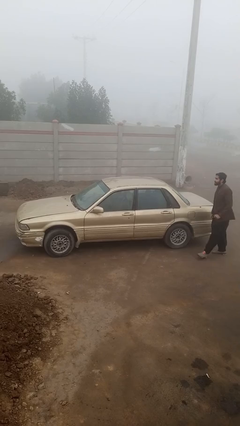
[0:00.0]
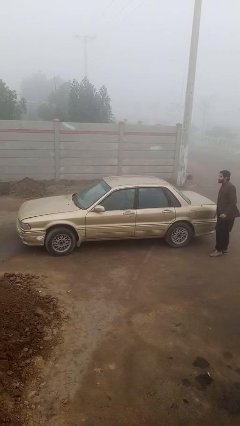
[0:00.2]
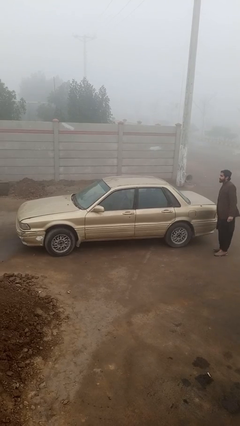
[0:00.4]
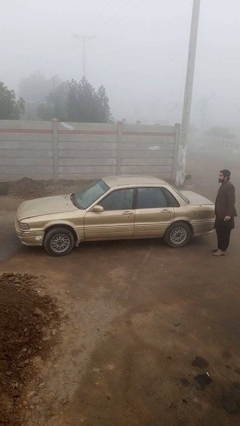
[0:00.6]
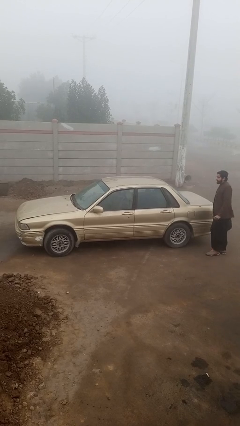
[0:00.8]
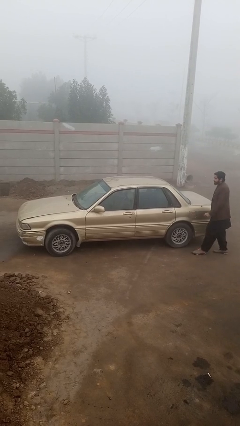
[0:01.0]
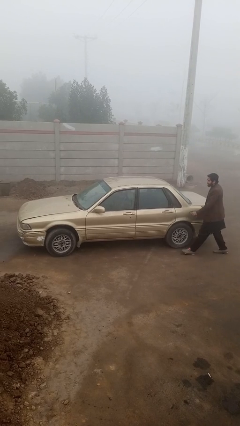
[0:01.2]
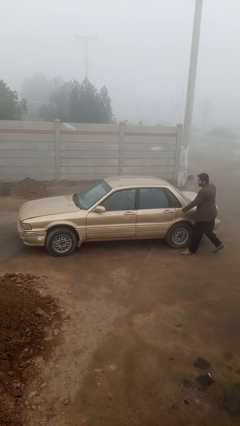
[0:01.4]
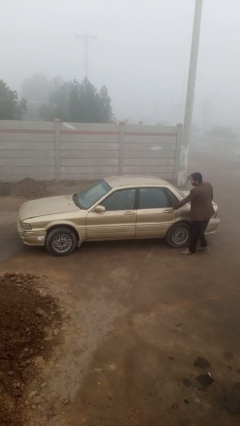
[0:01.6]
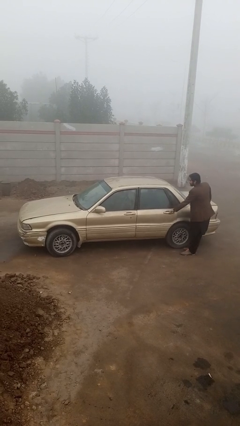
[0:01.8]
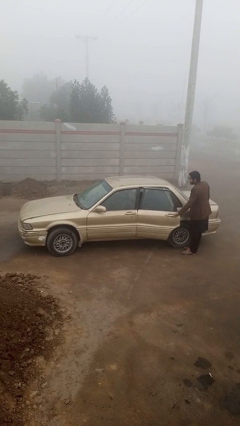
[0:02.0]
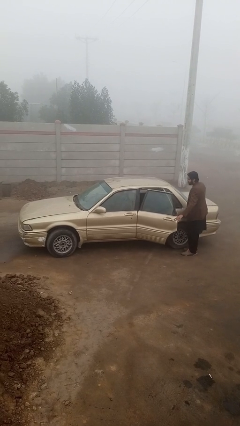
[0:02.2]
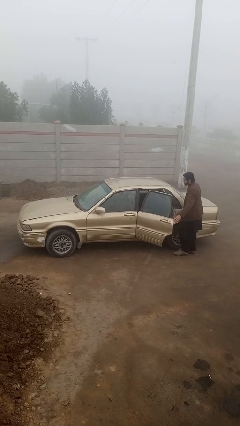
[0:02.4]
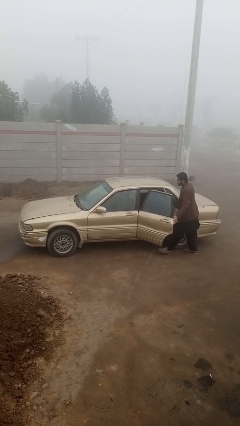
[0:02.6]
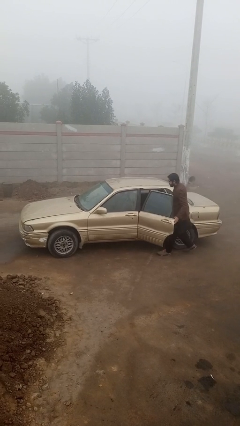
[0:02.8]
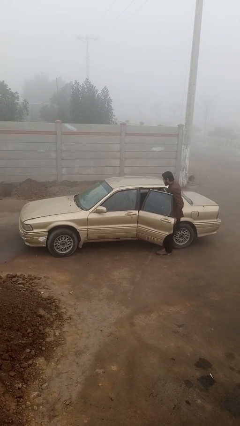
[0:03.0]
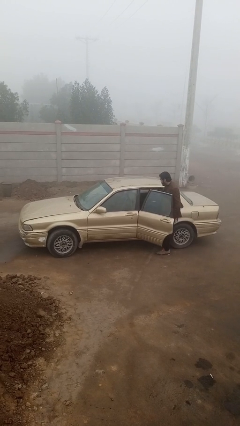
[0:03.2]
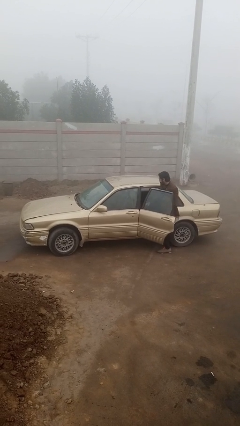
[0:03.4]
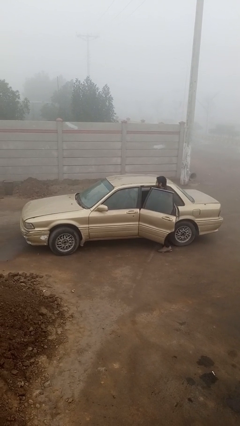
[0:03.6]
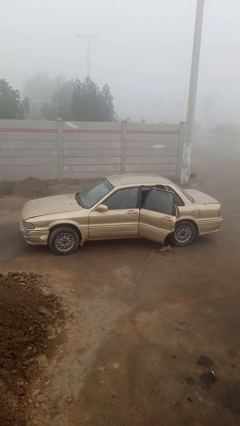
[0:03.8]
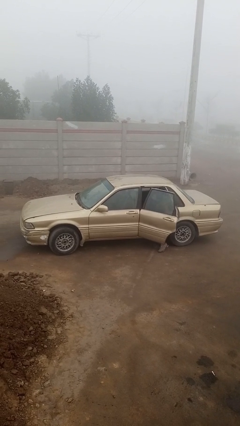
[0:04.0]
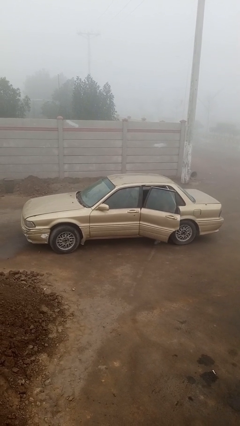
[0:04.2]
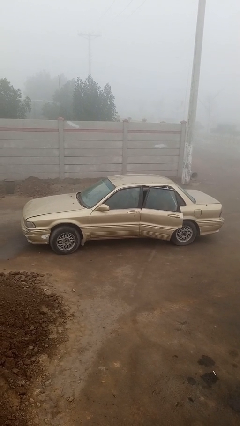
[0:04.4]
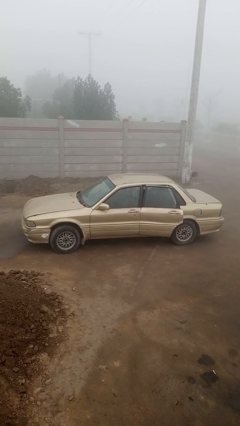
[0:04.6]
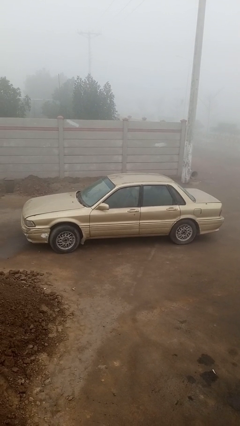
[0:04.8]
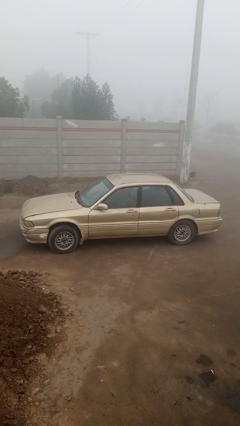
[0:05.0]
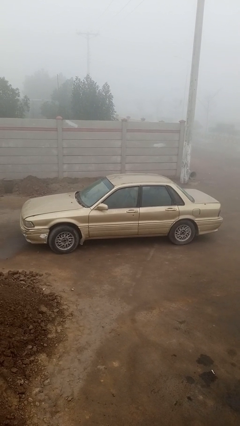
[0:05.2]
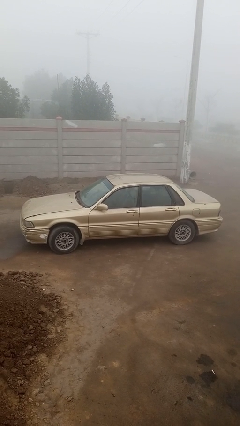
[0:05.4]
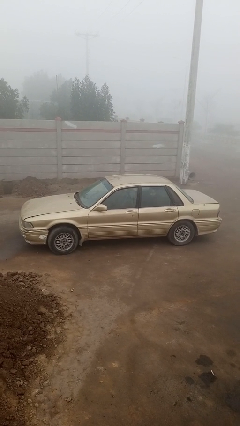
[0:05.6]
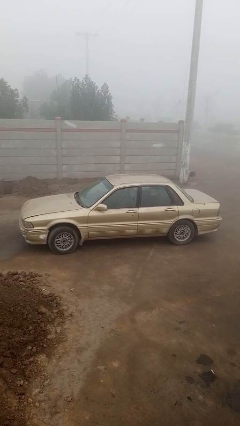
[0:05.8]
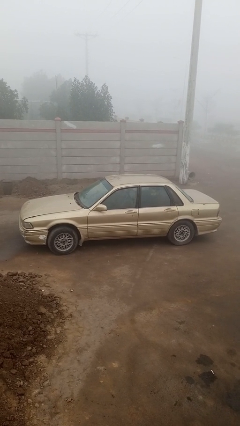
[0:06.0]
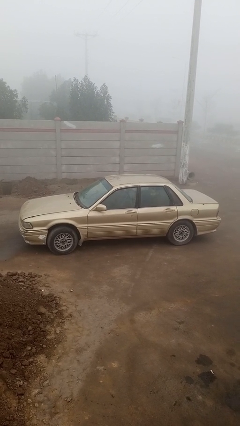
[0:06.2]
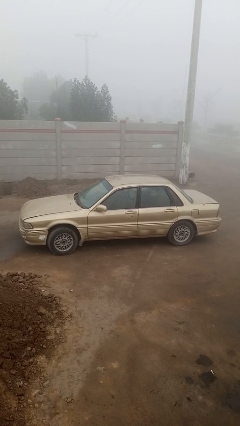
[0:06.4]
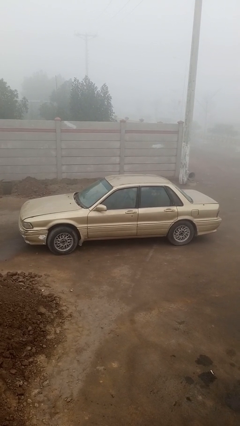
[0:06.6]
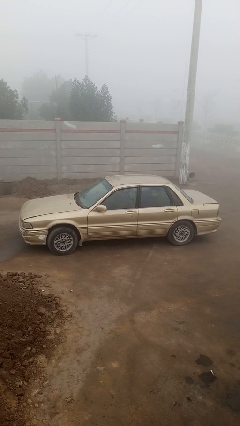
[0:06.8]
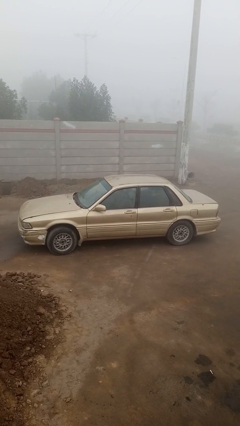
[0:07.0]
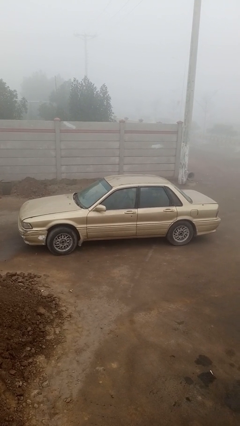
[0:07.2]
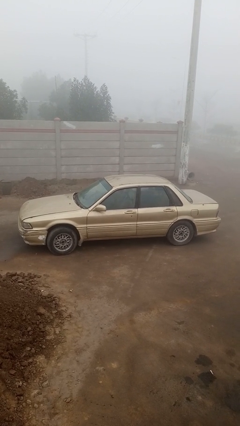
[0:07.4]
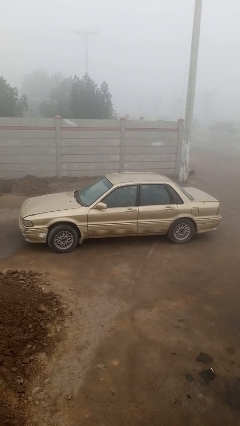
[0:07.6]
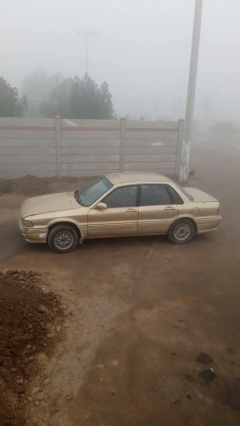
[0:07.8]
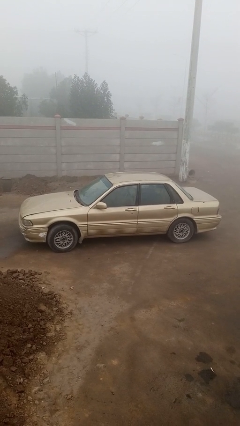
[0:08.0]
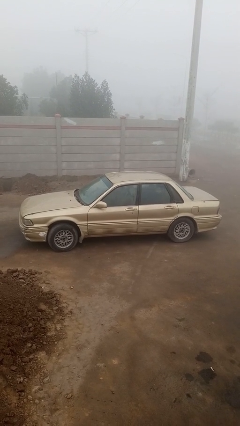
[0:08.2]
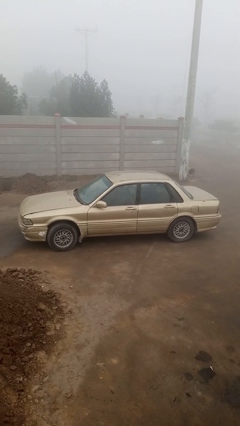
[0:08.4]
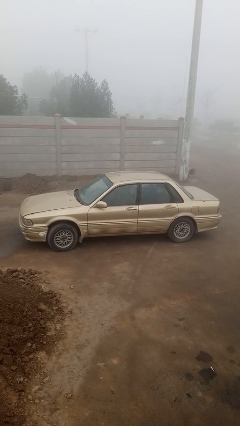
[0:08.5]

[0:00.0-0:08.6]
car picks up person

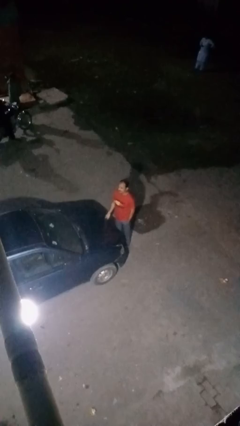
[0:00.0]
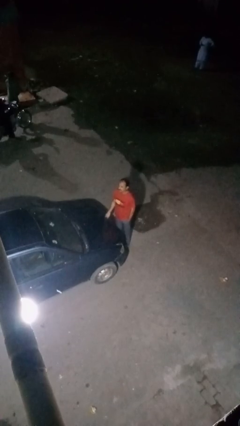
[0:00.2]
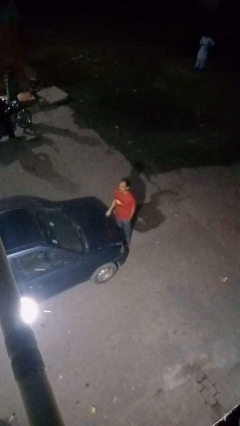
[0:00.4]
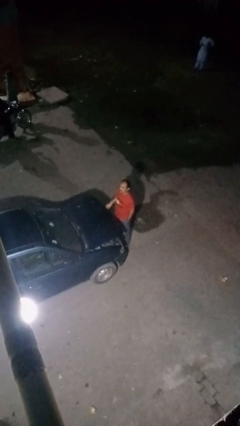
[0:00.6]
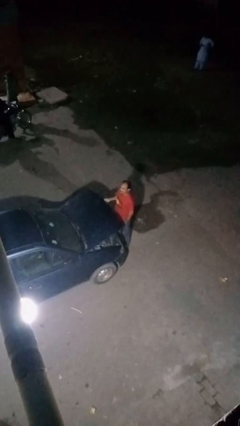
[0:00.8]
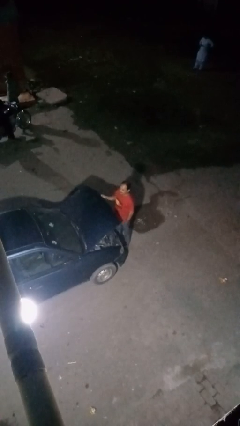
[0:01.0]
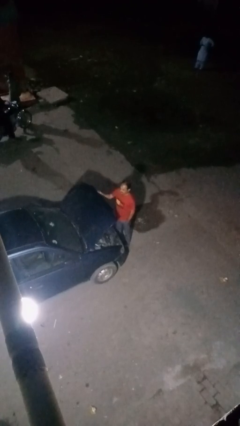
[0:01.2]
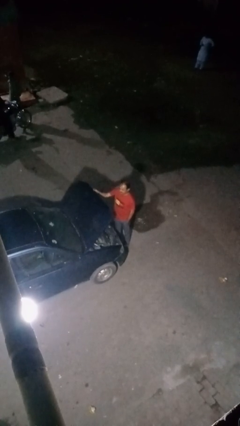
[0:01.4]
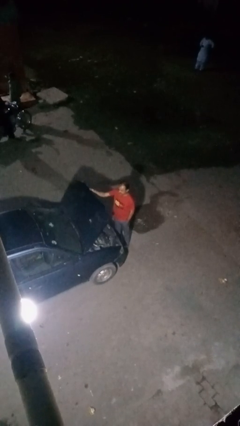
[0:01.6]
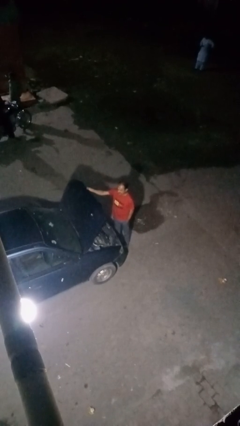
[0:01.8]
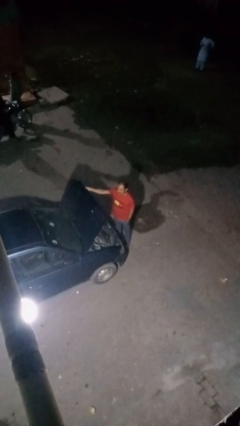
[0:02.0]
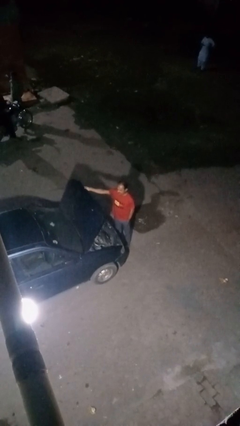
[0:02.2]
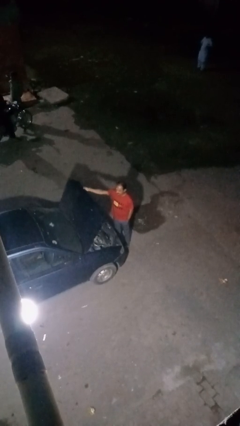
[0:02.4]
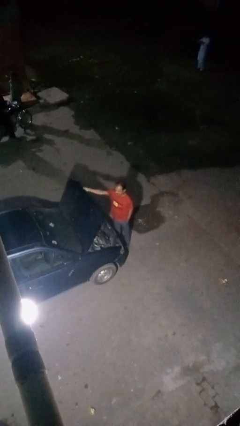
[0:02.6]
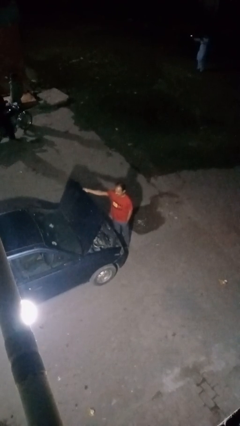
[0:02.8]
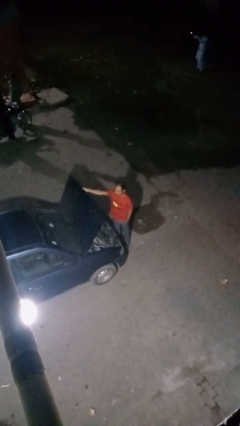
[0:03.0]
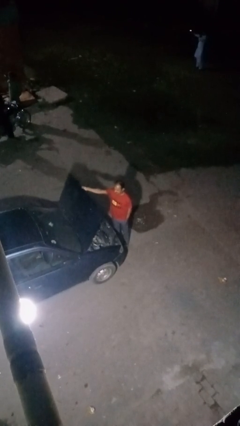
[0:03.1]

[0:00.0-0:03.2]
person opens car hood

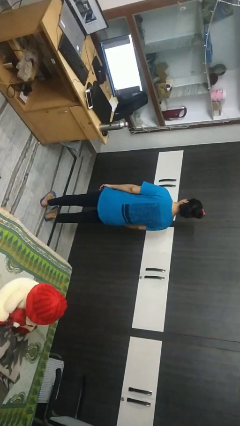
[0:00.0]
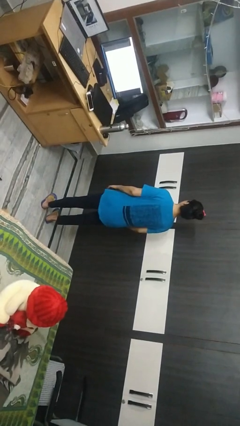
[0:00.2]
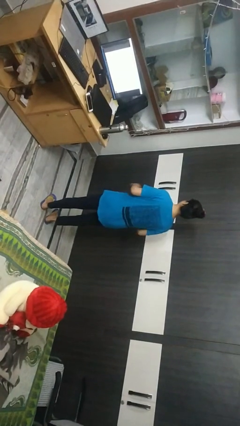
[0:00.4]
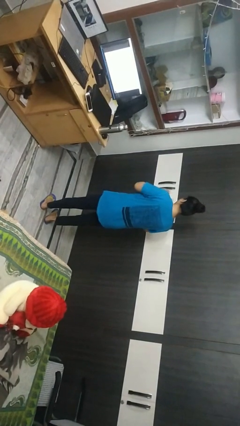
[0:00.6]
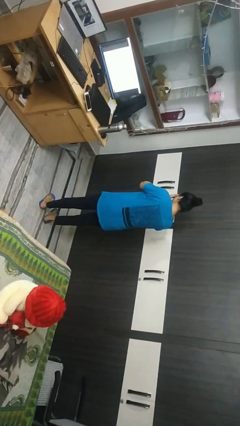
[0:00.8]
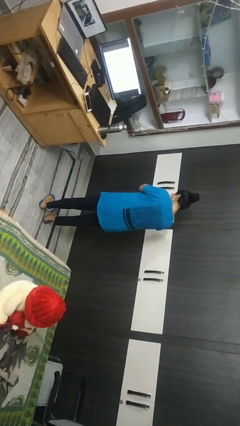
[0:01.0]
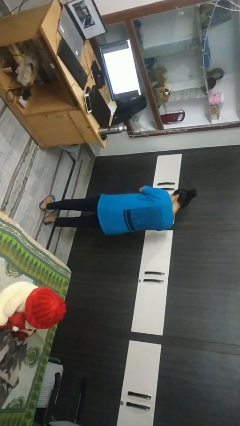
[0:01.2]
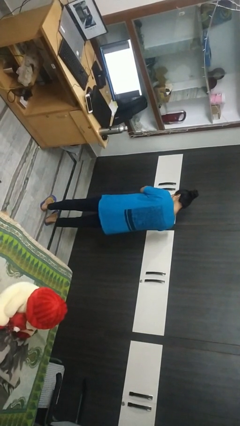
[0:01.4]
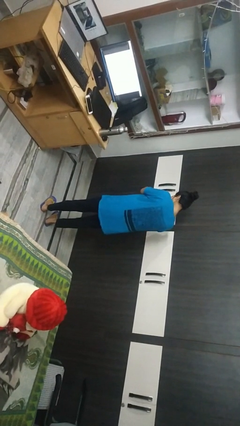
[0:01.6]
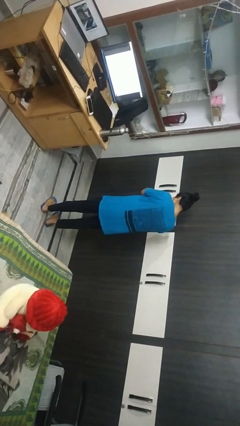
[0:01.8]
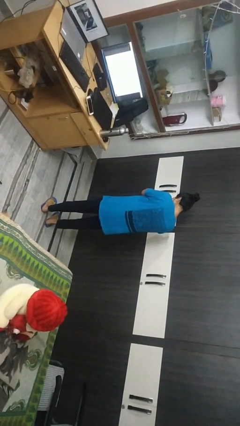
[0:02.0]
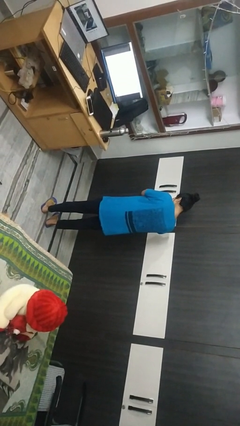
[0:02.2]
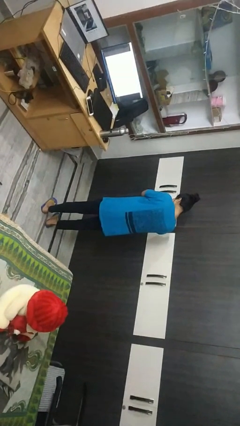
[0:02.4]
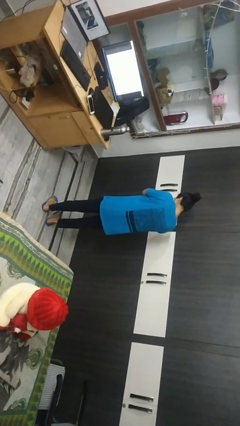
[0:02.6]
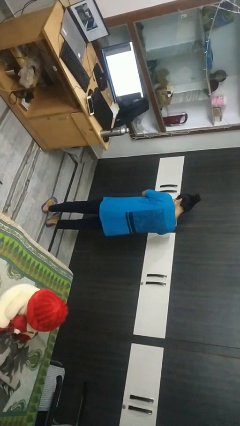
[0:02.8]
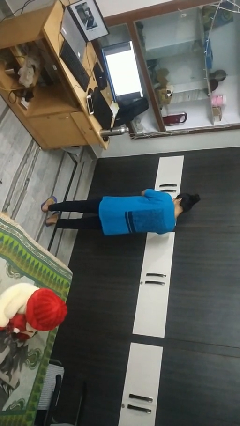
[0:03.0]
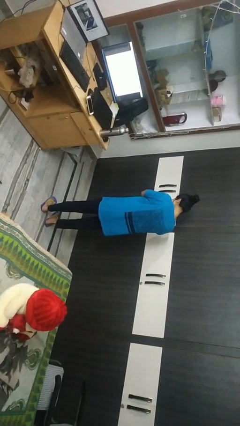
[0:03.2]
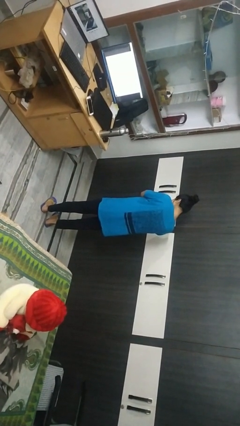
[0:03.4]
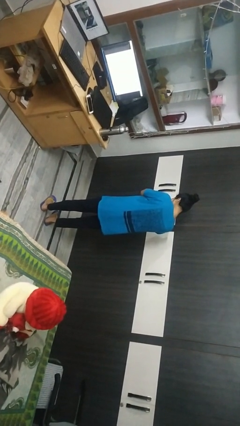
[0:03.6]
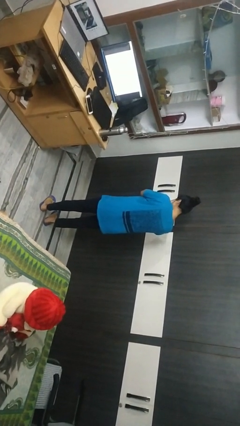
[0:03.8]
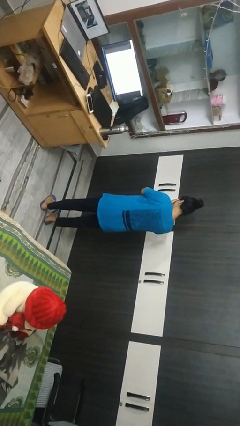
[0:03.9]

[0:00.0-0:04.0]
person covers face with hands

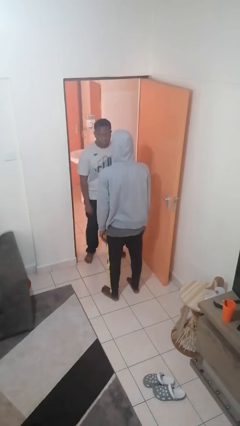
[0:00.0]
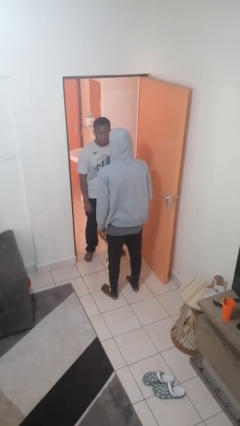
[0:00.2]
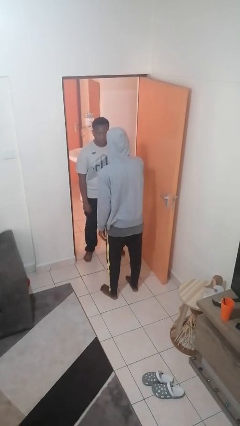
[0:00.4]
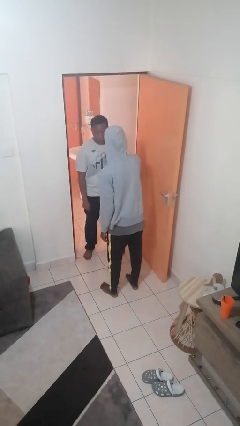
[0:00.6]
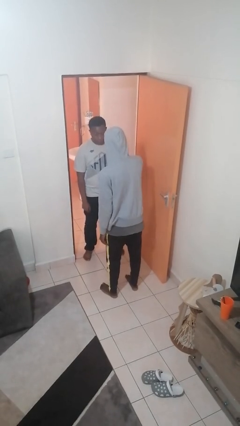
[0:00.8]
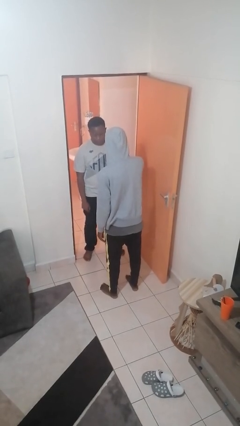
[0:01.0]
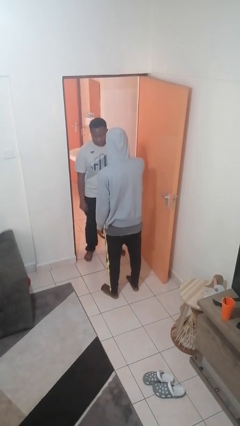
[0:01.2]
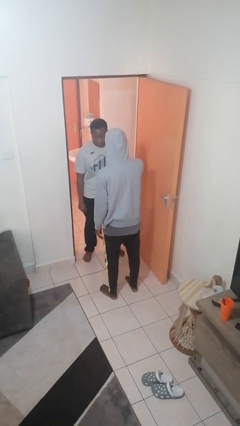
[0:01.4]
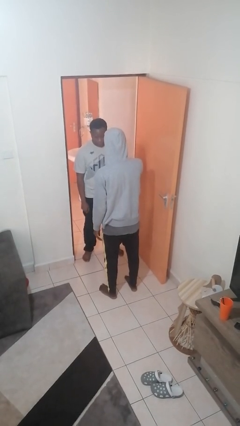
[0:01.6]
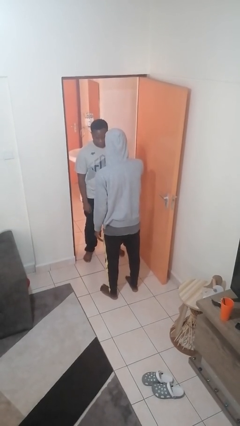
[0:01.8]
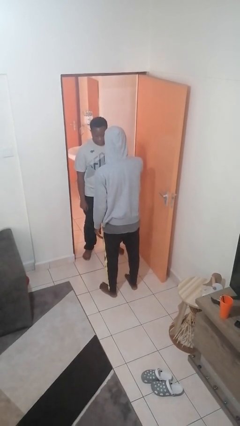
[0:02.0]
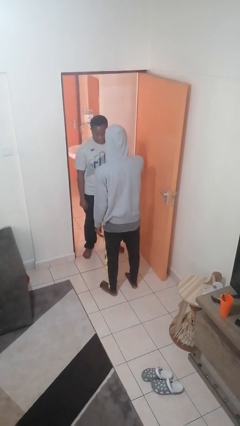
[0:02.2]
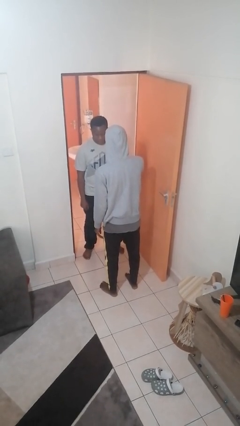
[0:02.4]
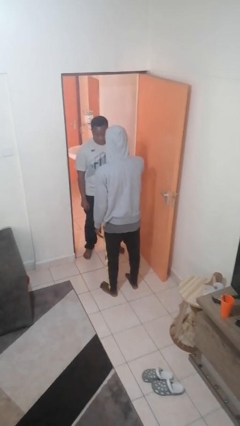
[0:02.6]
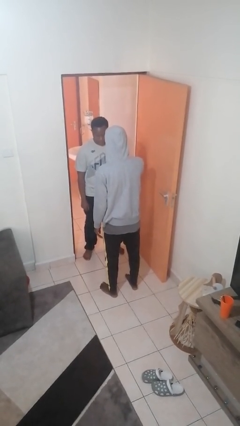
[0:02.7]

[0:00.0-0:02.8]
person grabs person by bicep
